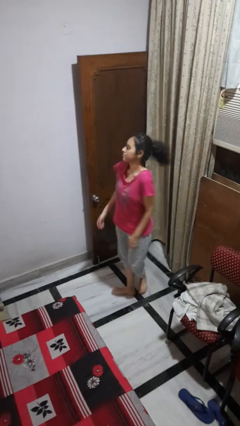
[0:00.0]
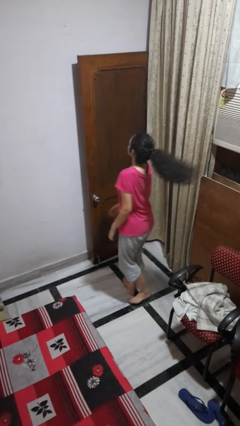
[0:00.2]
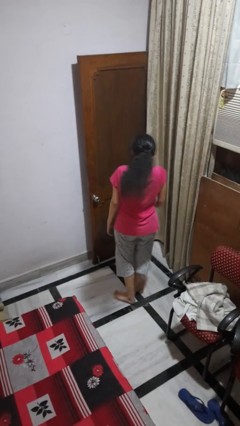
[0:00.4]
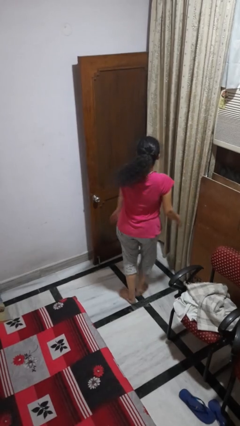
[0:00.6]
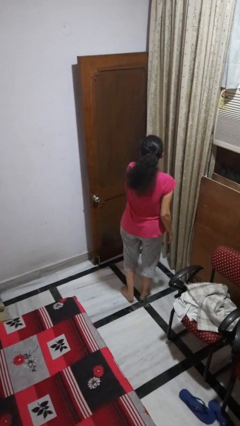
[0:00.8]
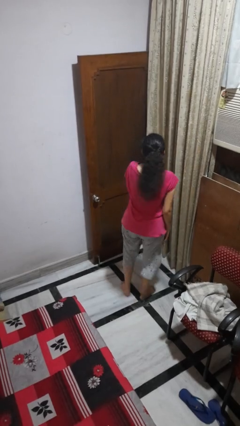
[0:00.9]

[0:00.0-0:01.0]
person twirls

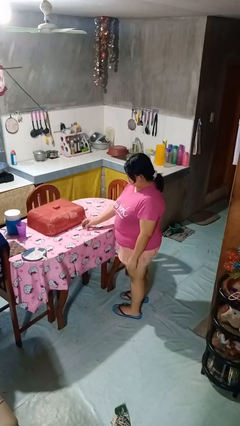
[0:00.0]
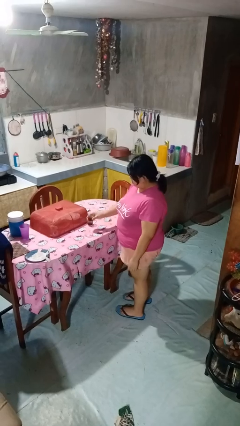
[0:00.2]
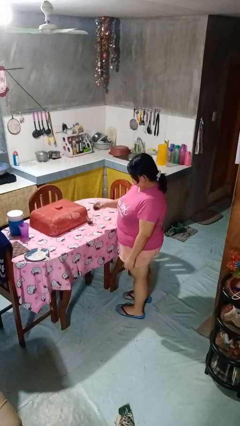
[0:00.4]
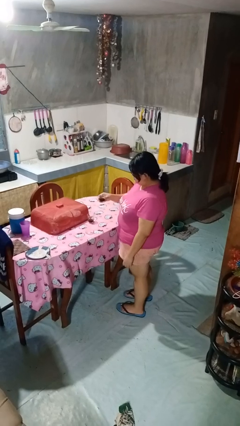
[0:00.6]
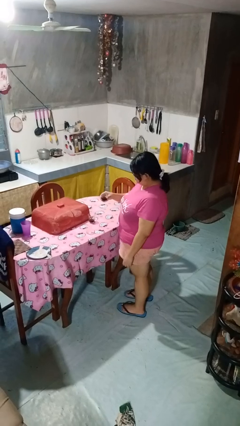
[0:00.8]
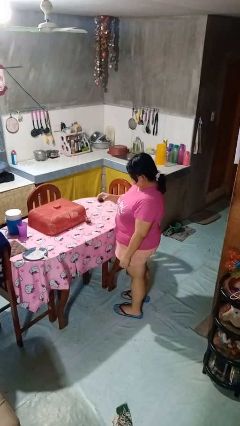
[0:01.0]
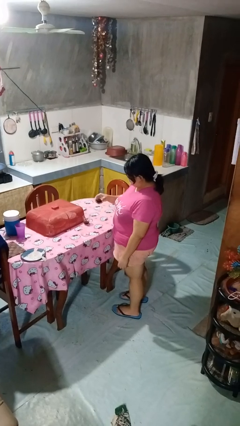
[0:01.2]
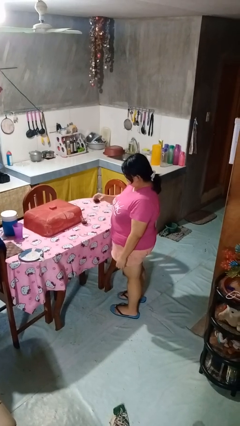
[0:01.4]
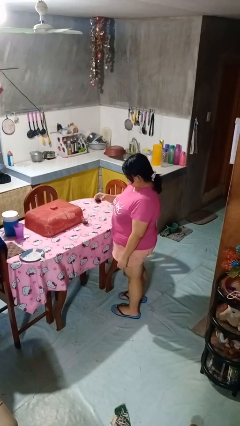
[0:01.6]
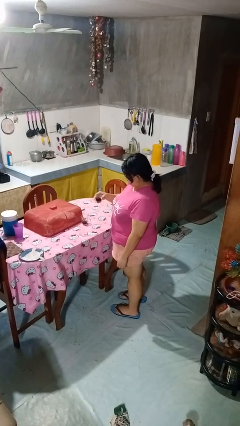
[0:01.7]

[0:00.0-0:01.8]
person picks up object from table

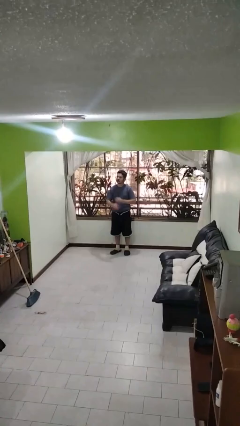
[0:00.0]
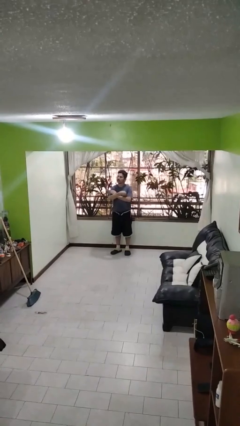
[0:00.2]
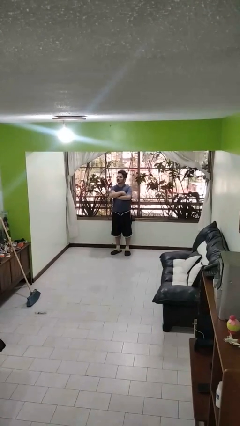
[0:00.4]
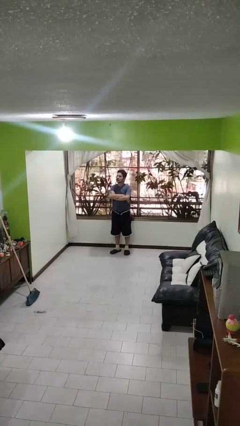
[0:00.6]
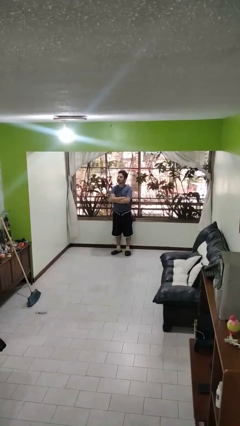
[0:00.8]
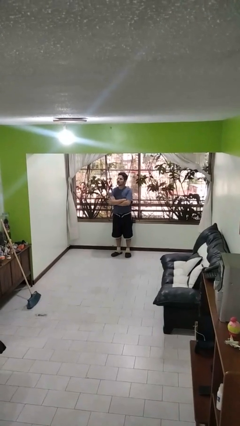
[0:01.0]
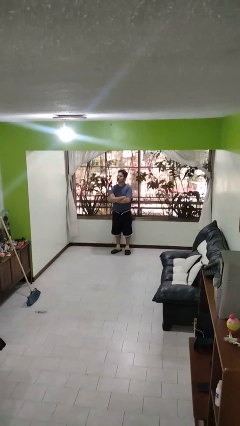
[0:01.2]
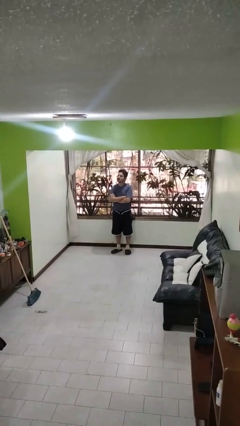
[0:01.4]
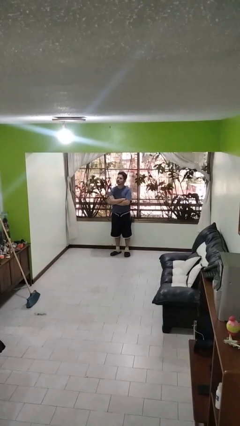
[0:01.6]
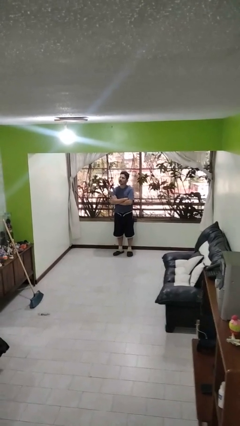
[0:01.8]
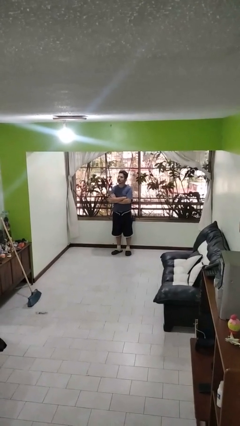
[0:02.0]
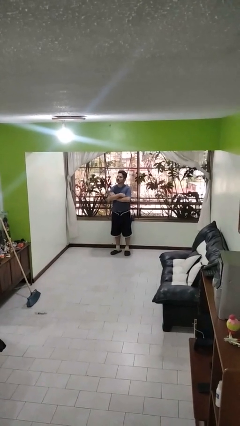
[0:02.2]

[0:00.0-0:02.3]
person crosses arms

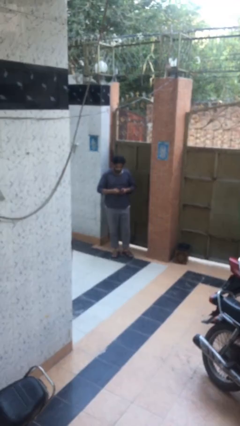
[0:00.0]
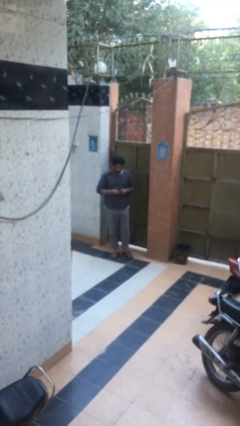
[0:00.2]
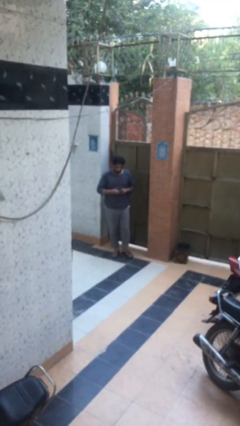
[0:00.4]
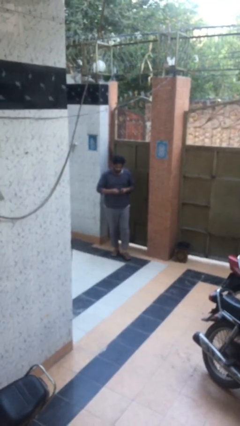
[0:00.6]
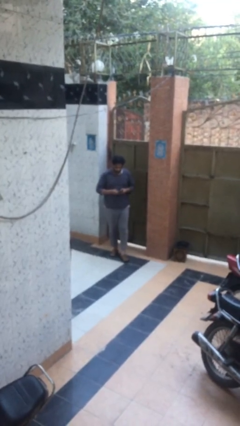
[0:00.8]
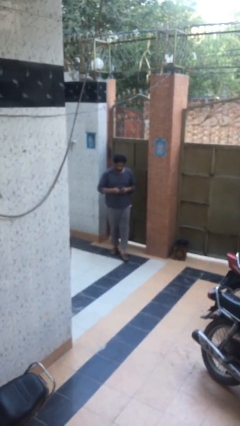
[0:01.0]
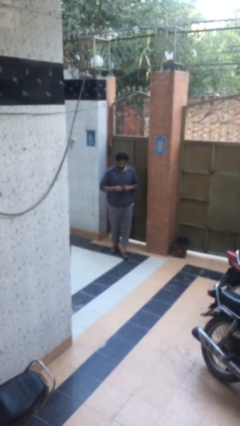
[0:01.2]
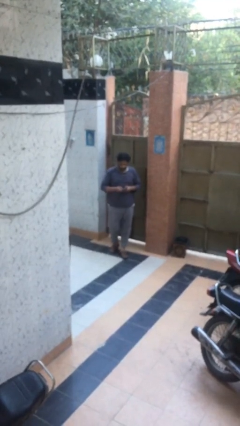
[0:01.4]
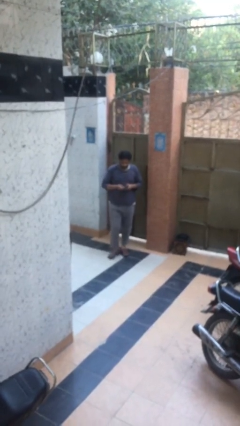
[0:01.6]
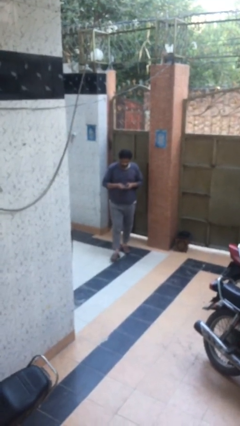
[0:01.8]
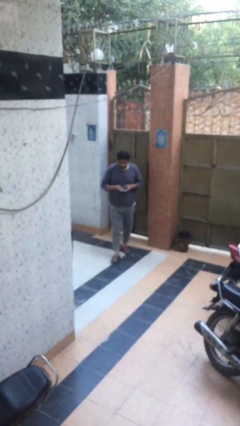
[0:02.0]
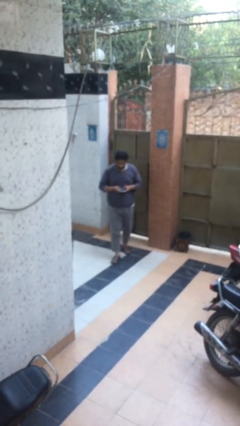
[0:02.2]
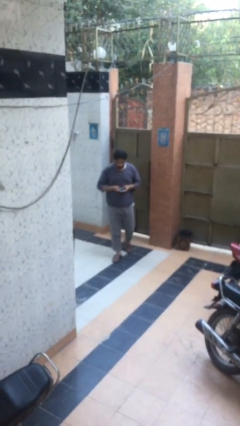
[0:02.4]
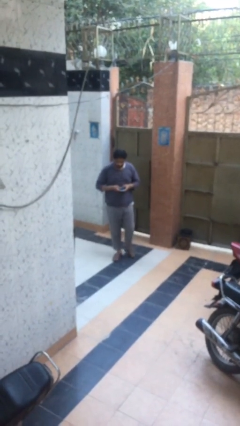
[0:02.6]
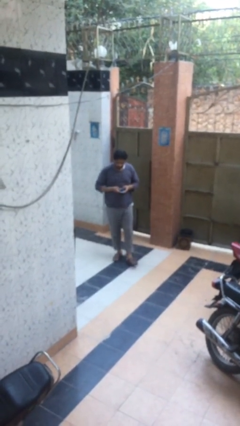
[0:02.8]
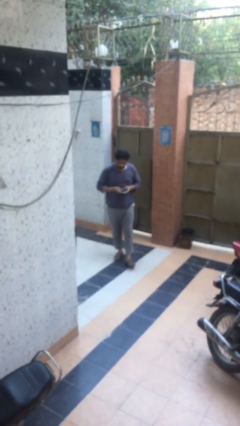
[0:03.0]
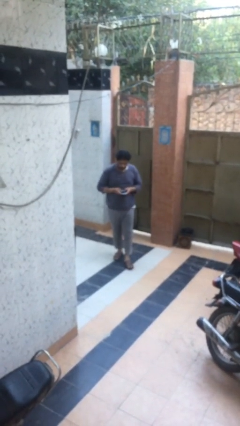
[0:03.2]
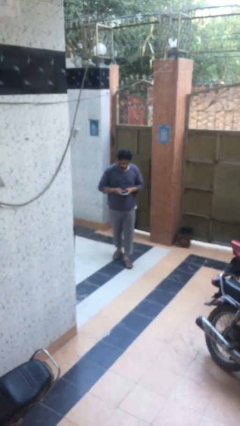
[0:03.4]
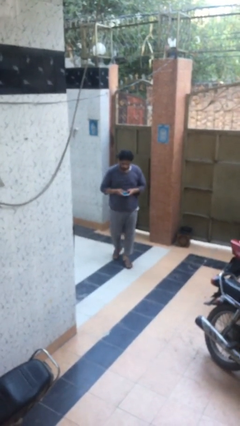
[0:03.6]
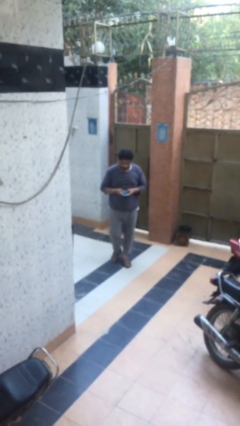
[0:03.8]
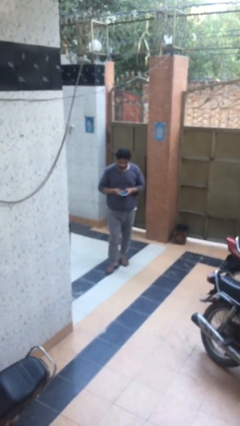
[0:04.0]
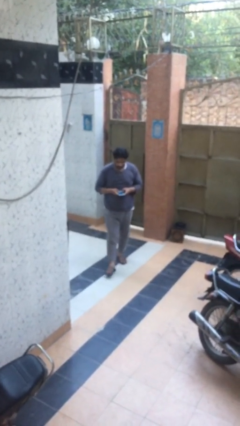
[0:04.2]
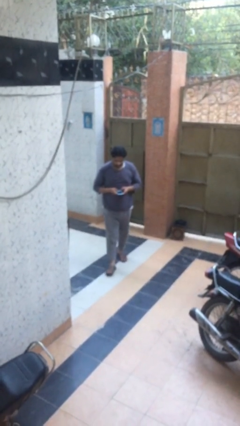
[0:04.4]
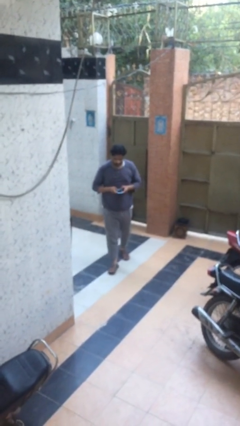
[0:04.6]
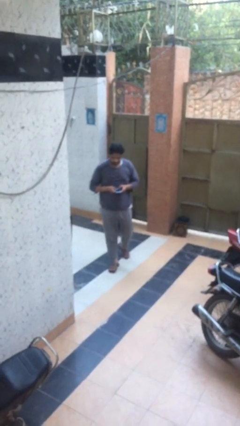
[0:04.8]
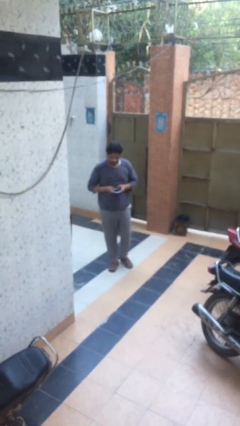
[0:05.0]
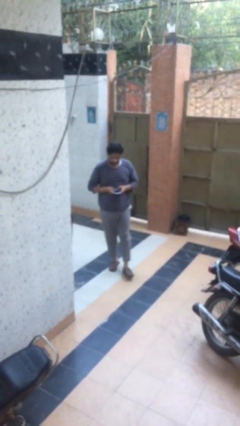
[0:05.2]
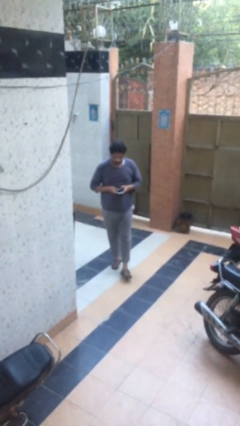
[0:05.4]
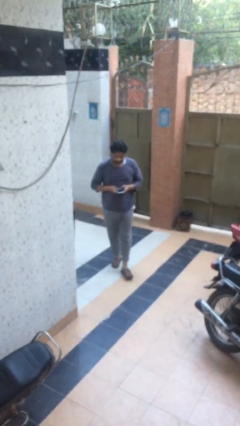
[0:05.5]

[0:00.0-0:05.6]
person texts on phone

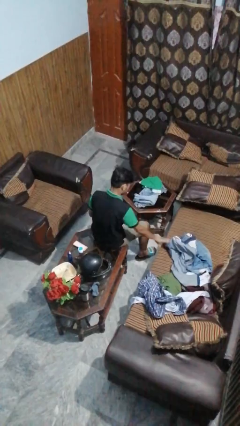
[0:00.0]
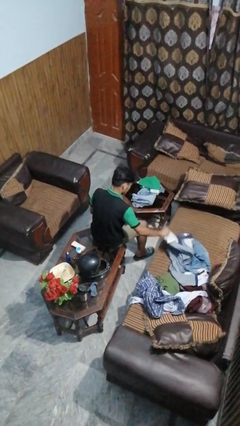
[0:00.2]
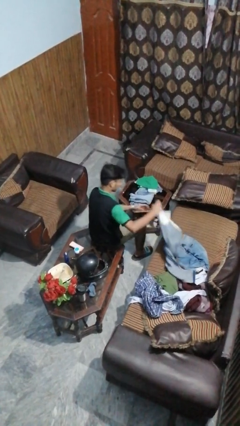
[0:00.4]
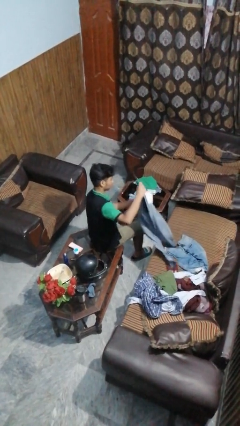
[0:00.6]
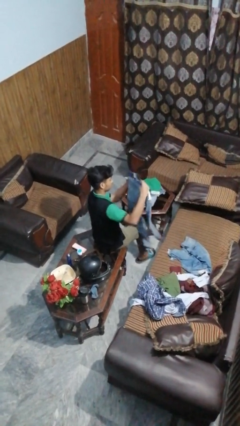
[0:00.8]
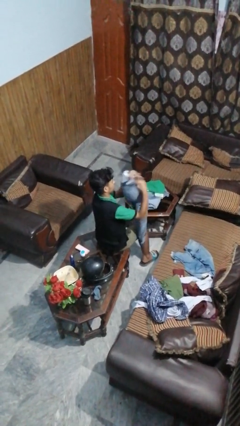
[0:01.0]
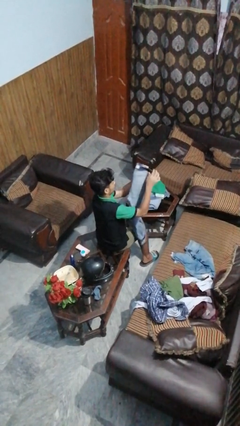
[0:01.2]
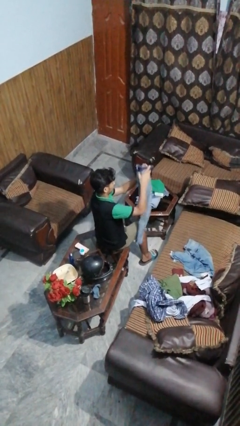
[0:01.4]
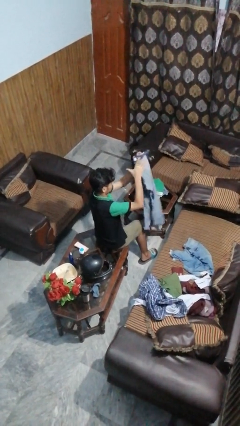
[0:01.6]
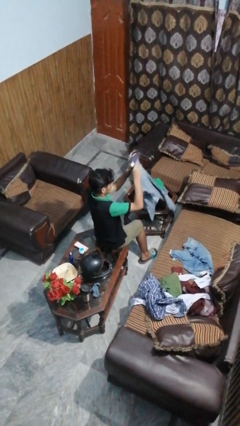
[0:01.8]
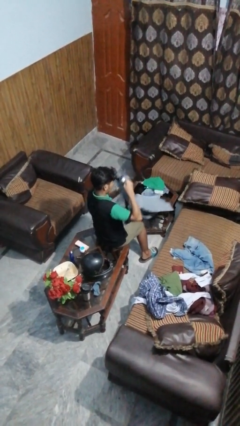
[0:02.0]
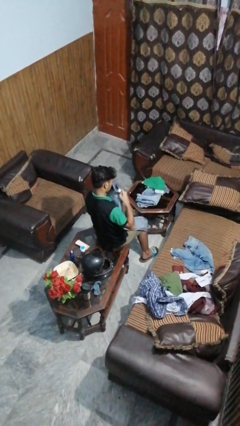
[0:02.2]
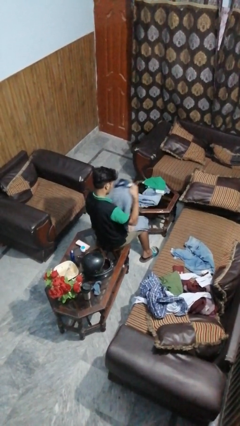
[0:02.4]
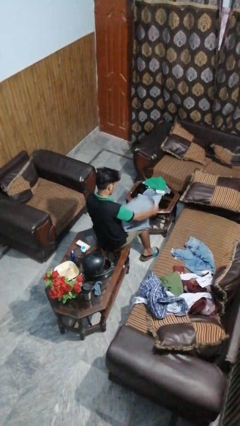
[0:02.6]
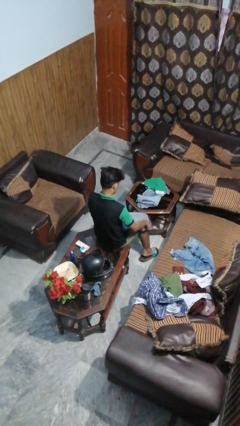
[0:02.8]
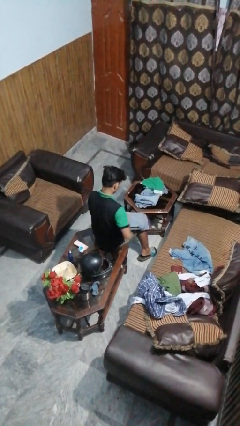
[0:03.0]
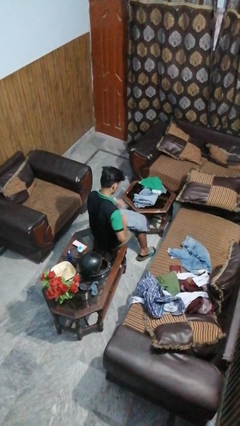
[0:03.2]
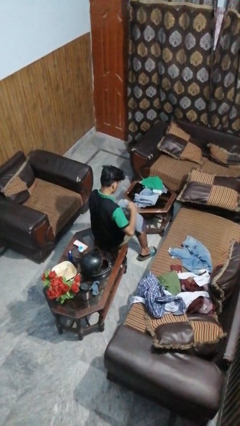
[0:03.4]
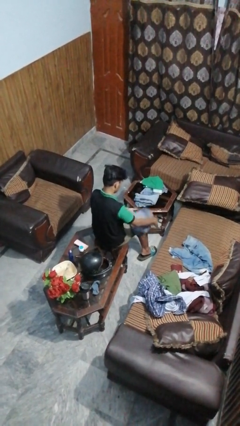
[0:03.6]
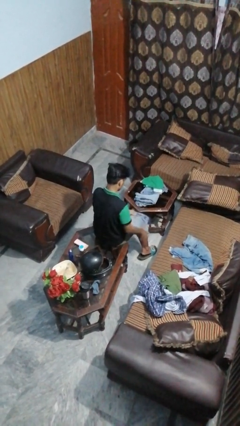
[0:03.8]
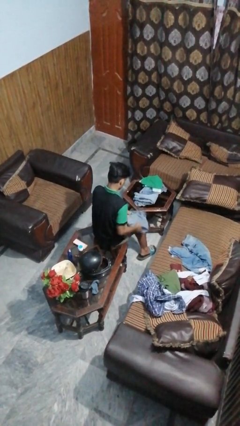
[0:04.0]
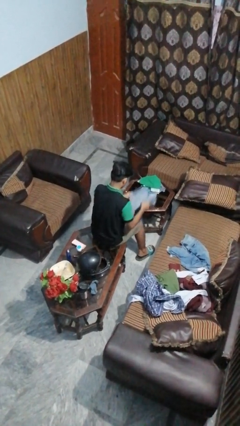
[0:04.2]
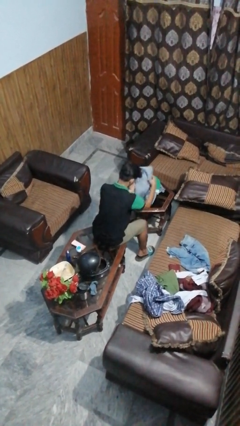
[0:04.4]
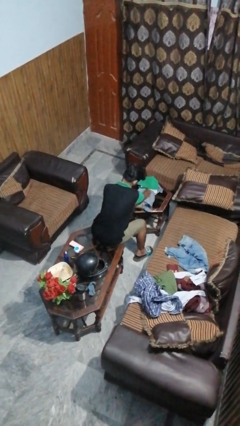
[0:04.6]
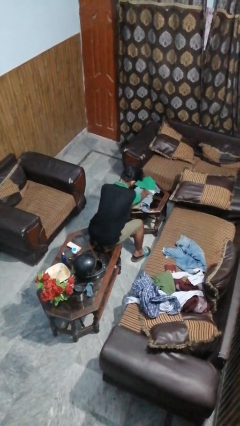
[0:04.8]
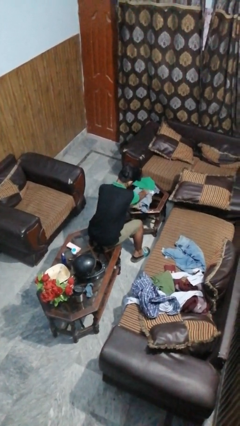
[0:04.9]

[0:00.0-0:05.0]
person folds pants

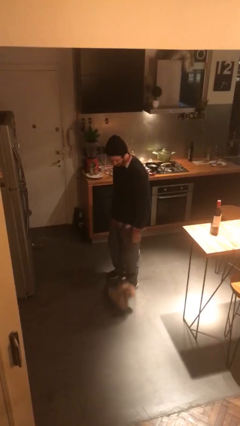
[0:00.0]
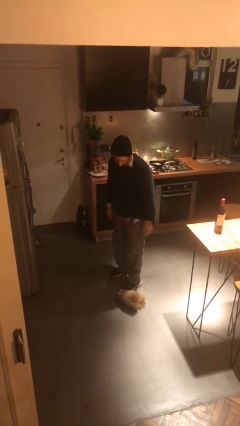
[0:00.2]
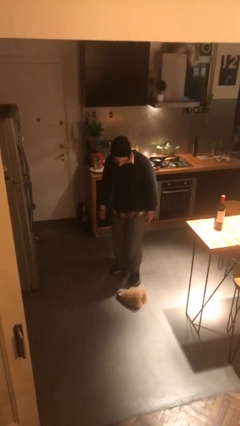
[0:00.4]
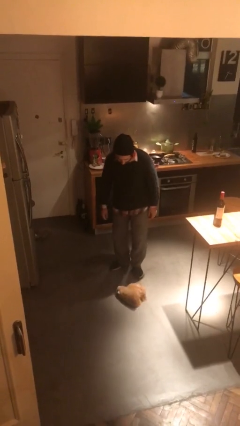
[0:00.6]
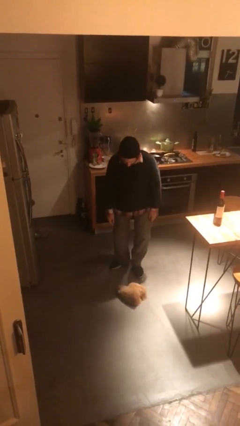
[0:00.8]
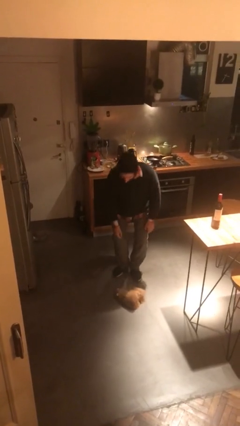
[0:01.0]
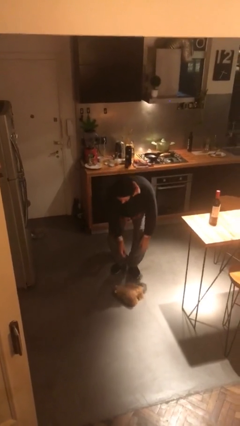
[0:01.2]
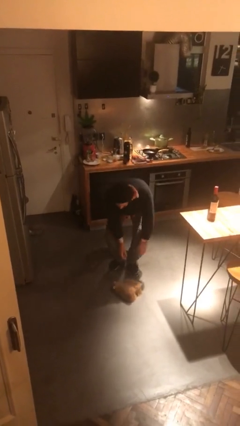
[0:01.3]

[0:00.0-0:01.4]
person drops object

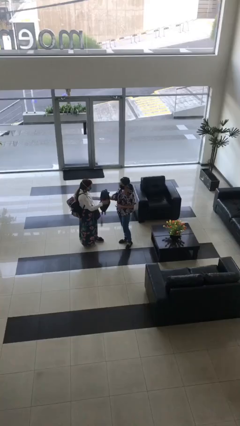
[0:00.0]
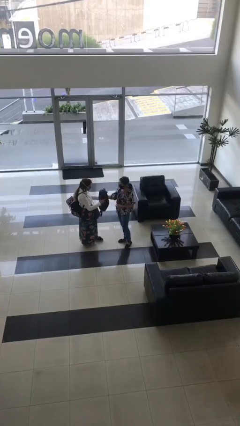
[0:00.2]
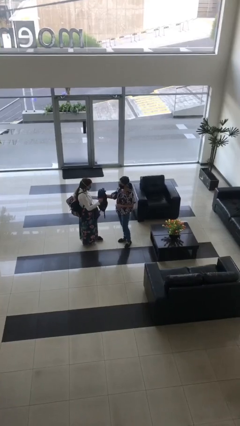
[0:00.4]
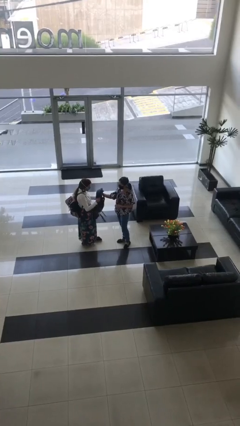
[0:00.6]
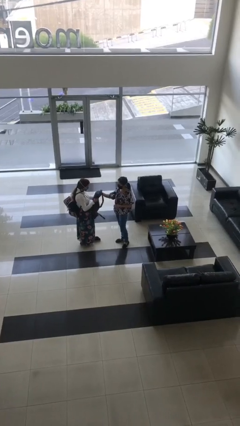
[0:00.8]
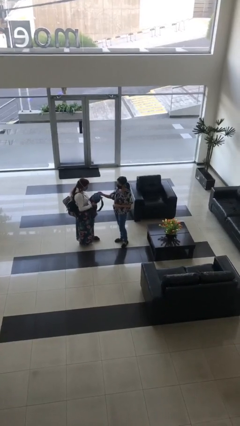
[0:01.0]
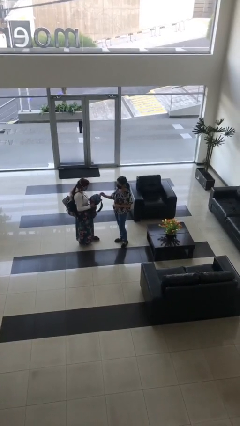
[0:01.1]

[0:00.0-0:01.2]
person transfers object to person
